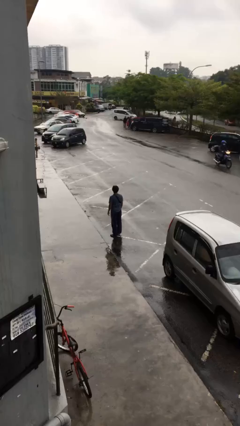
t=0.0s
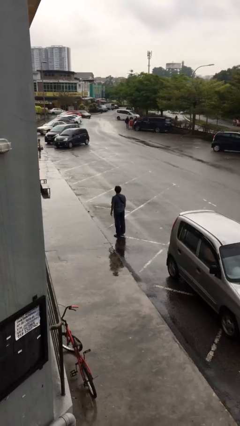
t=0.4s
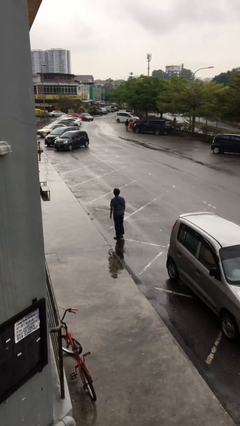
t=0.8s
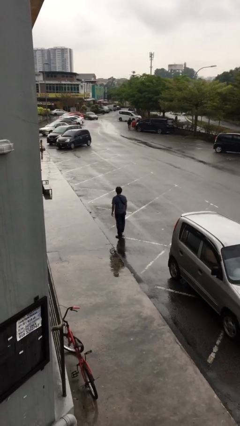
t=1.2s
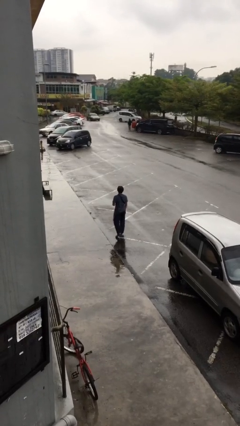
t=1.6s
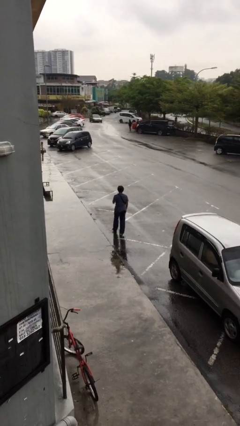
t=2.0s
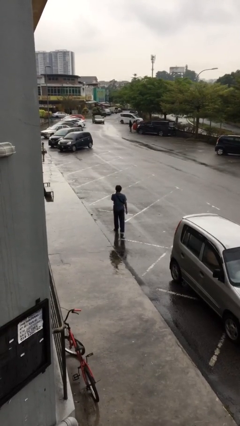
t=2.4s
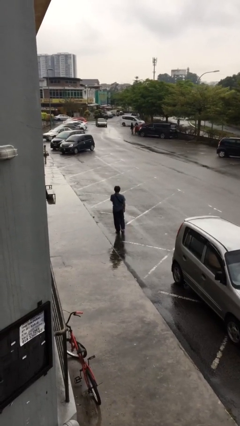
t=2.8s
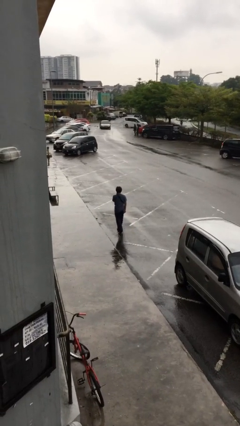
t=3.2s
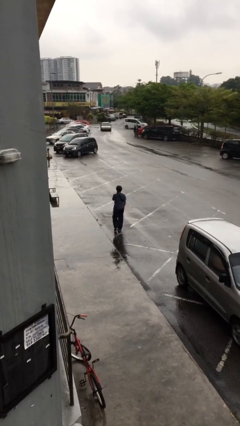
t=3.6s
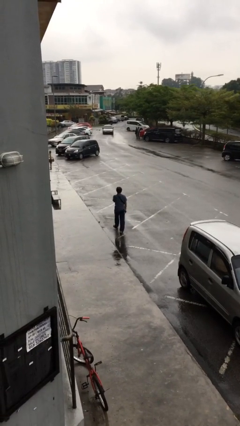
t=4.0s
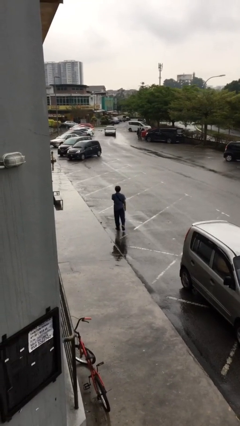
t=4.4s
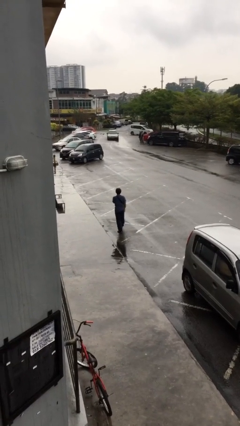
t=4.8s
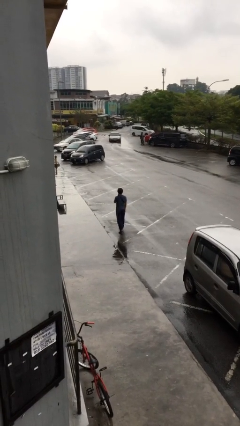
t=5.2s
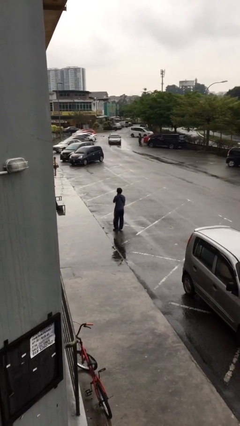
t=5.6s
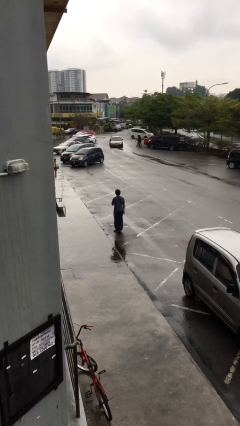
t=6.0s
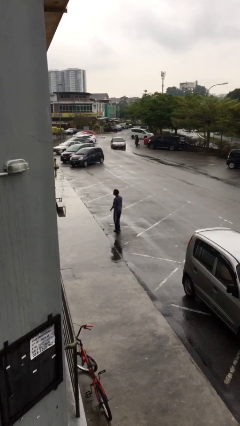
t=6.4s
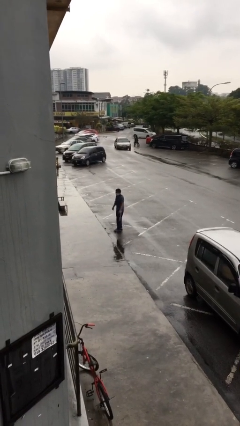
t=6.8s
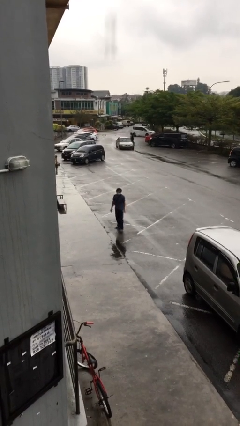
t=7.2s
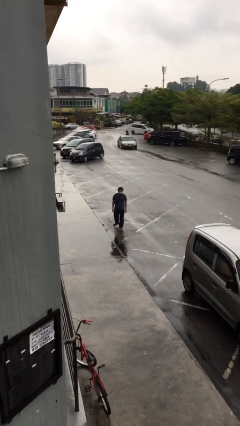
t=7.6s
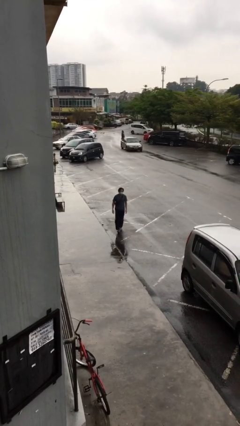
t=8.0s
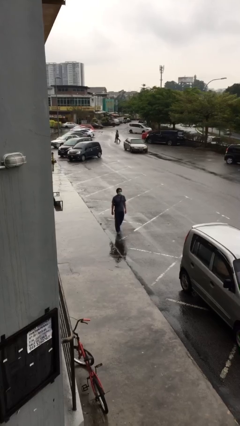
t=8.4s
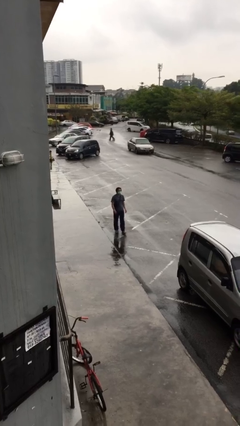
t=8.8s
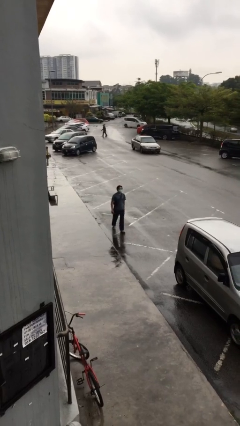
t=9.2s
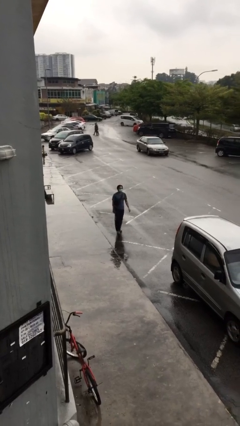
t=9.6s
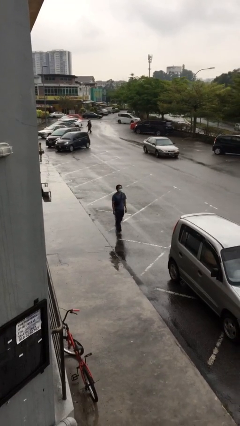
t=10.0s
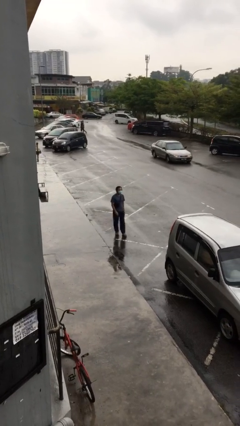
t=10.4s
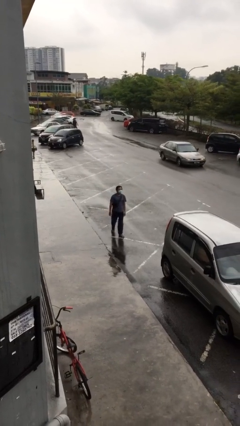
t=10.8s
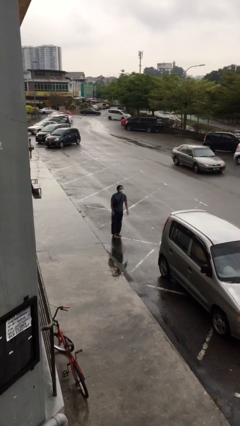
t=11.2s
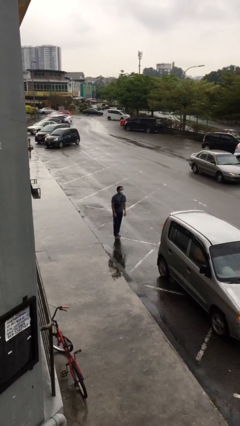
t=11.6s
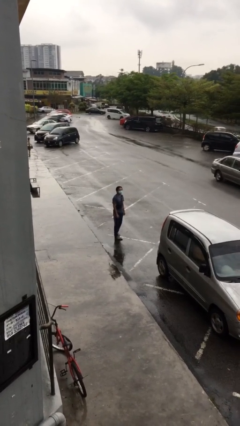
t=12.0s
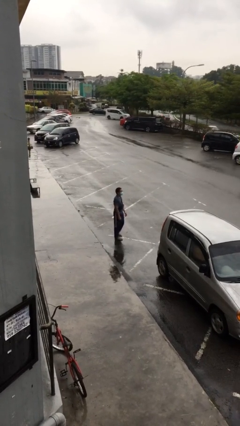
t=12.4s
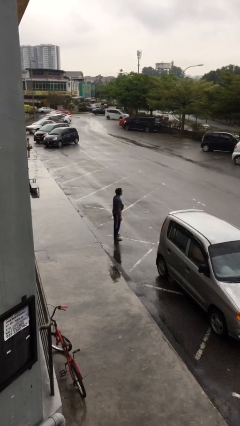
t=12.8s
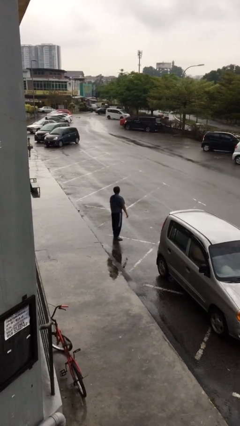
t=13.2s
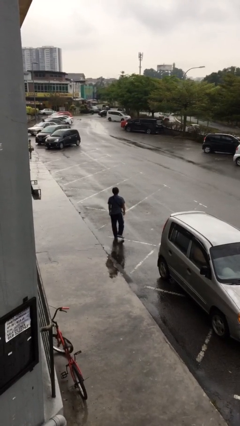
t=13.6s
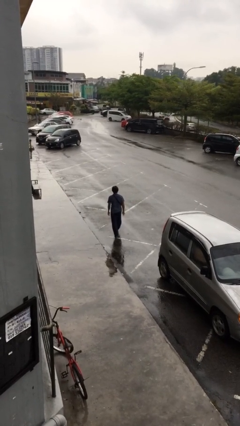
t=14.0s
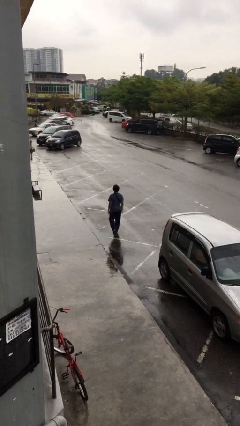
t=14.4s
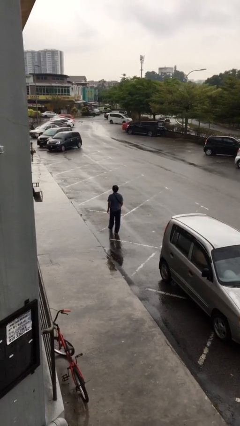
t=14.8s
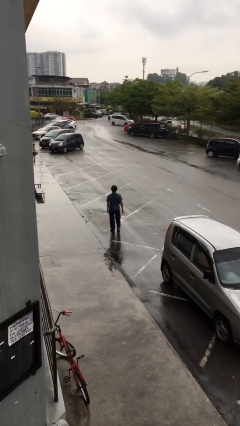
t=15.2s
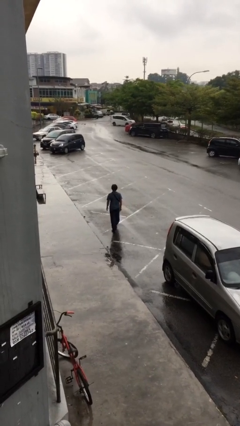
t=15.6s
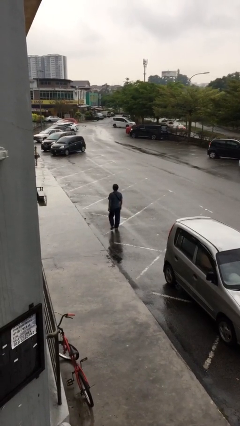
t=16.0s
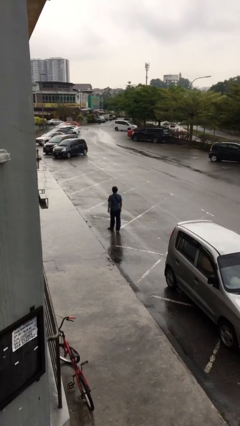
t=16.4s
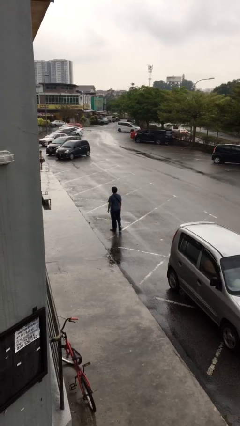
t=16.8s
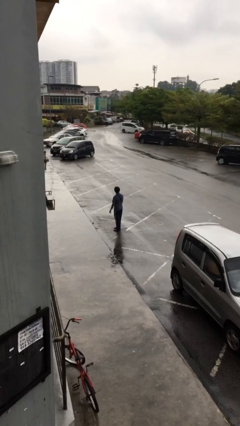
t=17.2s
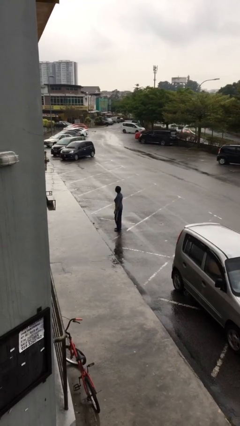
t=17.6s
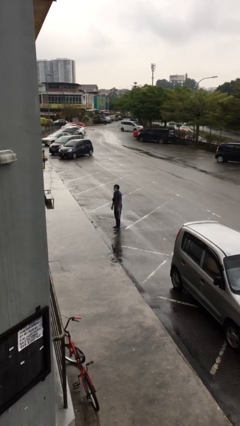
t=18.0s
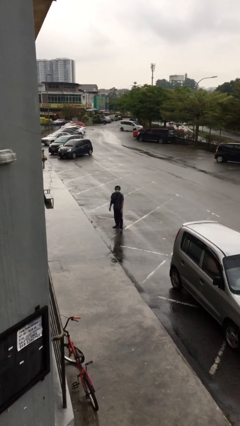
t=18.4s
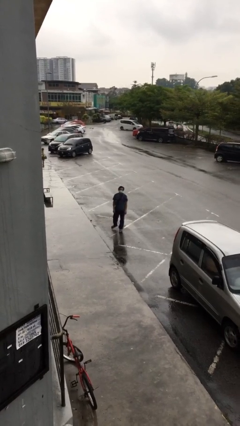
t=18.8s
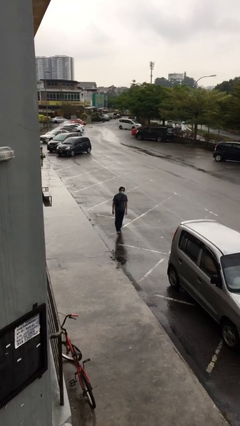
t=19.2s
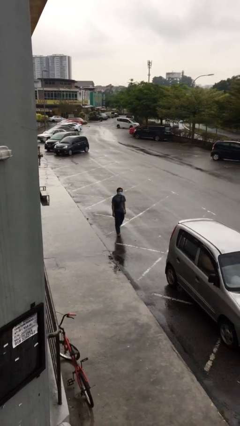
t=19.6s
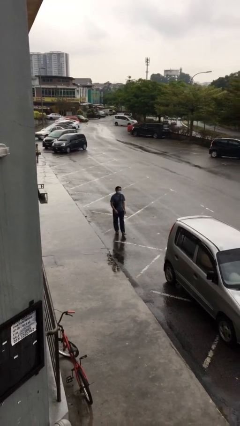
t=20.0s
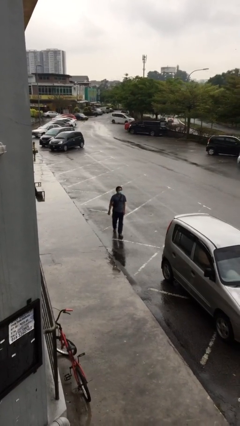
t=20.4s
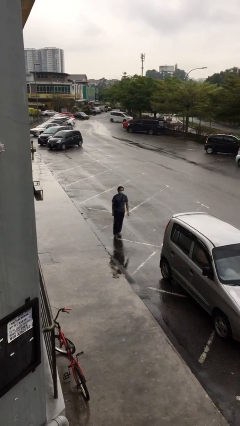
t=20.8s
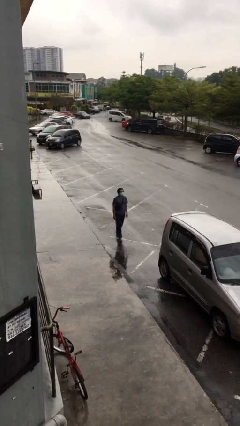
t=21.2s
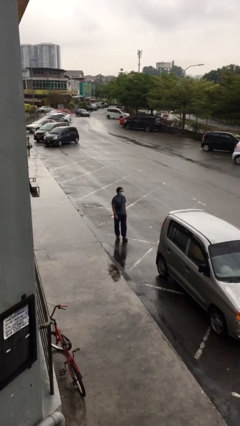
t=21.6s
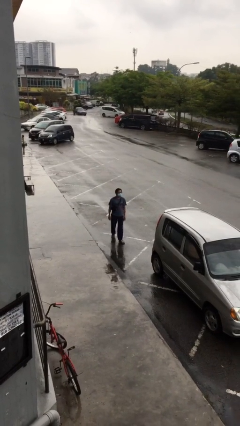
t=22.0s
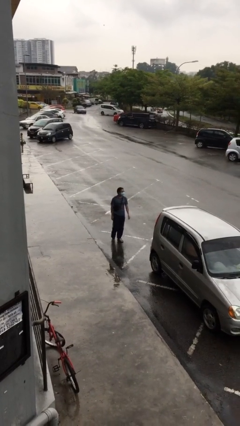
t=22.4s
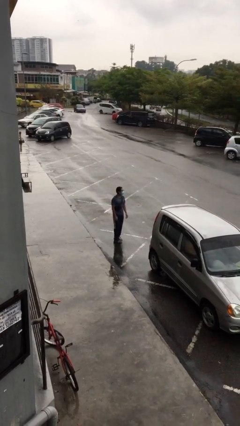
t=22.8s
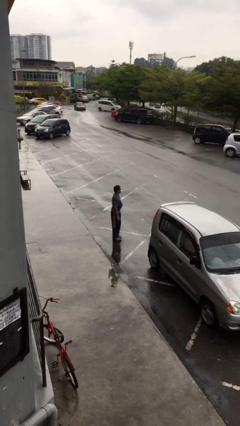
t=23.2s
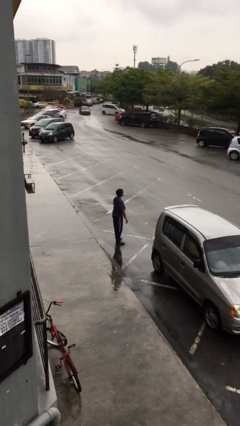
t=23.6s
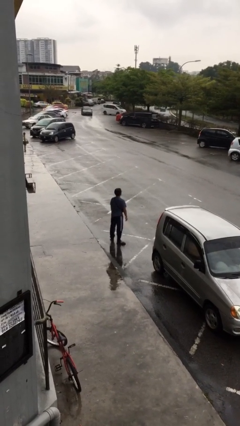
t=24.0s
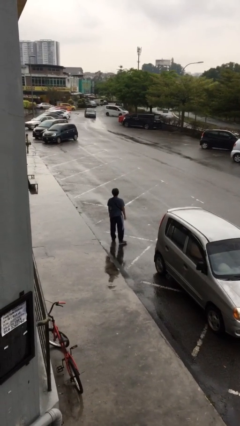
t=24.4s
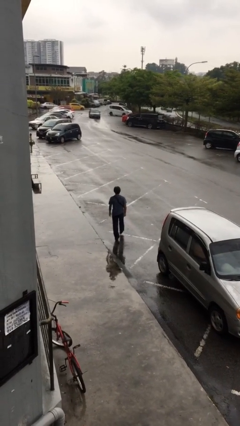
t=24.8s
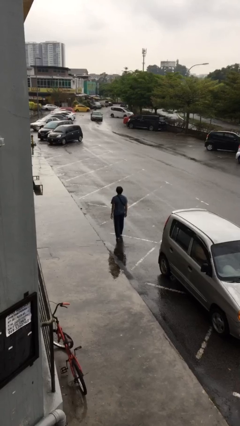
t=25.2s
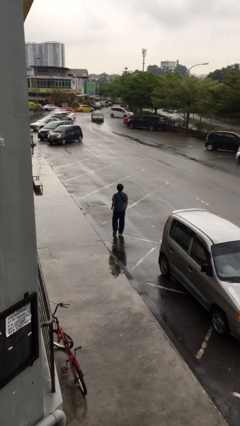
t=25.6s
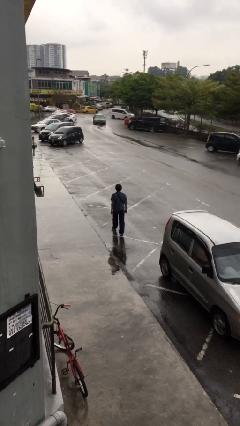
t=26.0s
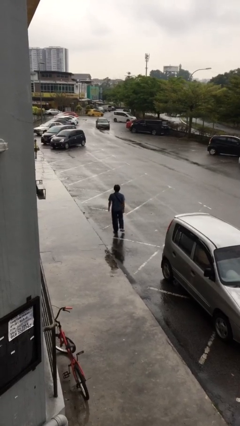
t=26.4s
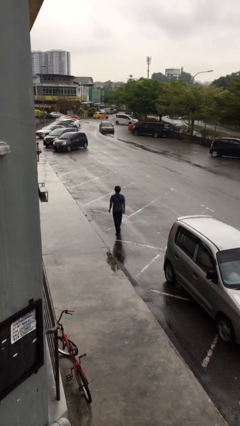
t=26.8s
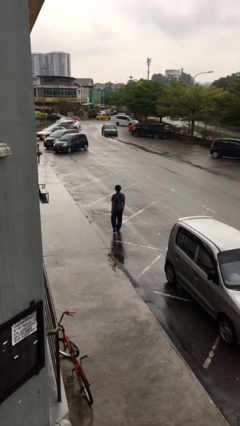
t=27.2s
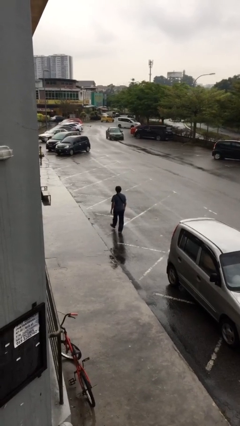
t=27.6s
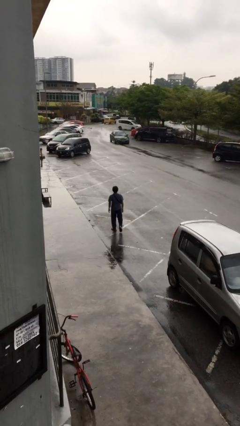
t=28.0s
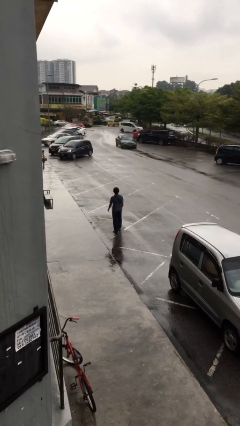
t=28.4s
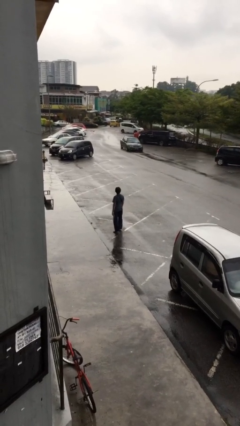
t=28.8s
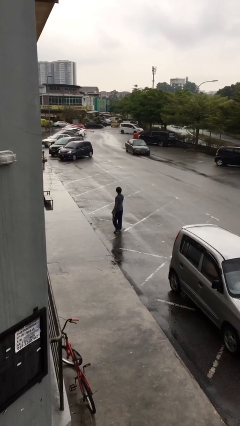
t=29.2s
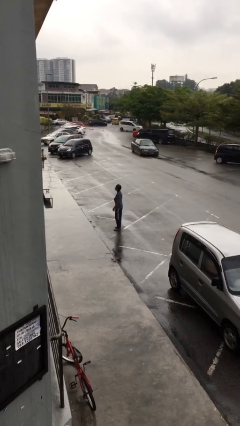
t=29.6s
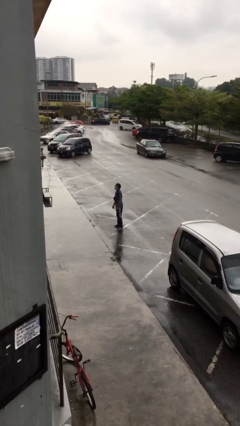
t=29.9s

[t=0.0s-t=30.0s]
person walks

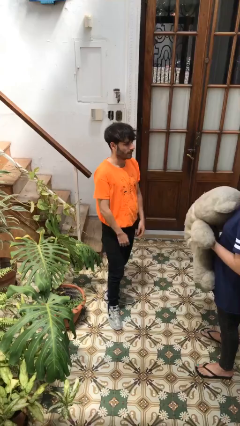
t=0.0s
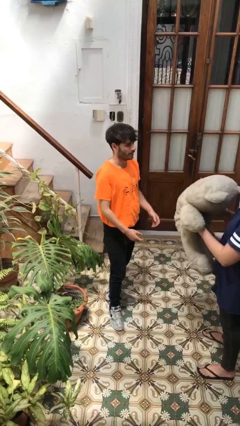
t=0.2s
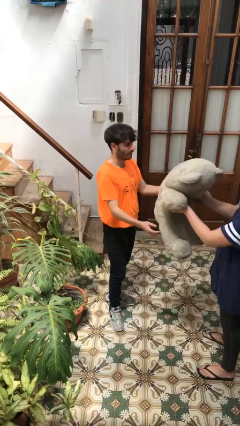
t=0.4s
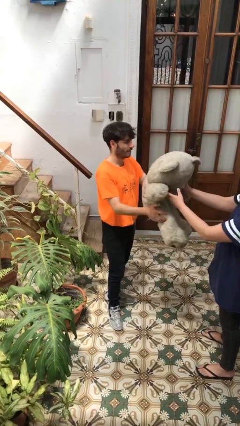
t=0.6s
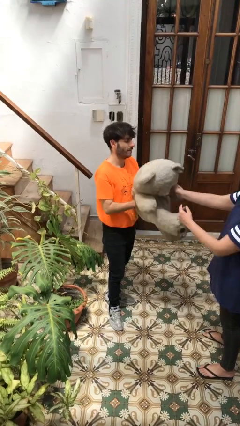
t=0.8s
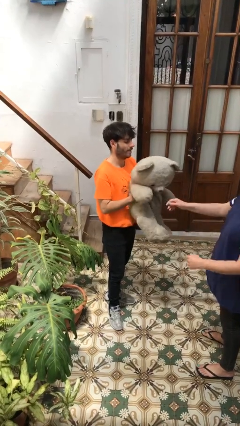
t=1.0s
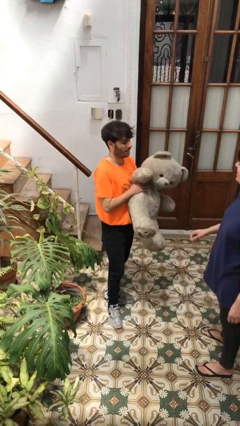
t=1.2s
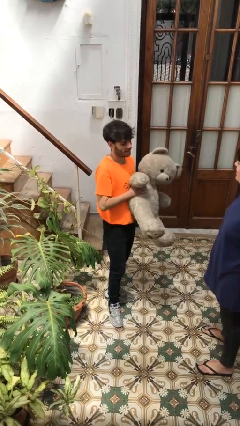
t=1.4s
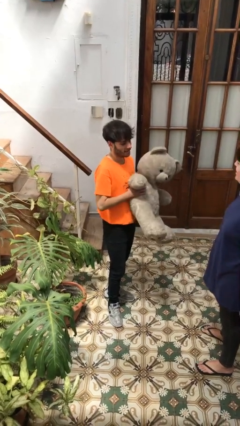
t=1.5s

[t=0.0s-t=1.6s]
person transfers object to person

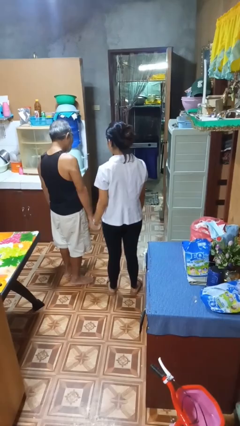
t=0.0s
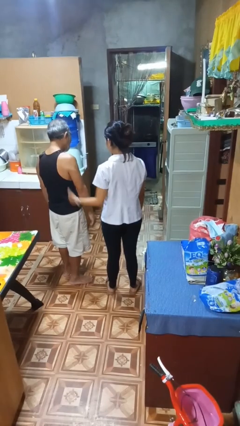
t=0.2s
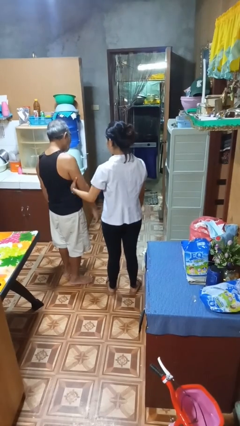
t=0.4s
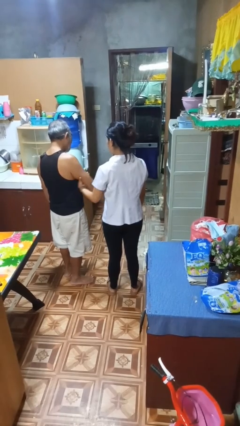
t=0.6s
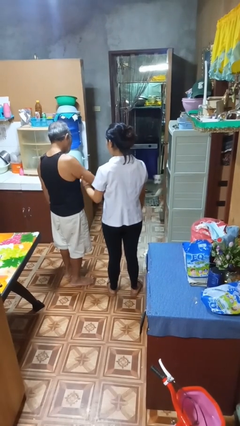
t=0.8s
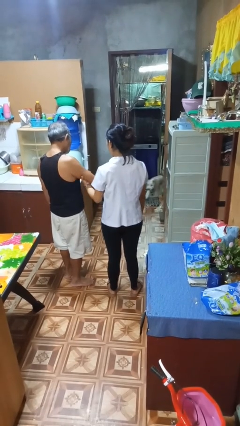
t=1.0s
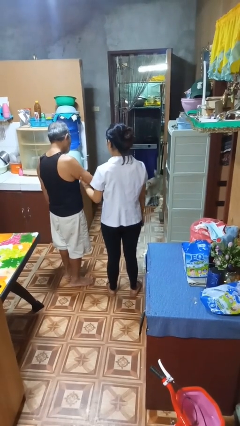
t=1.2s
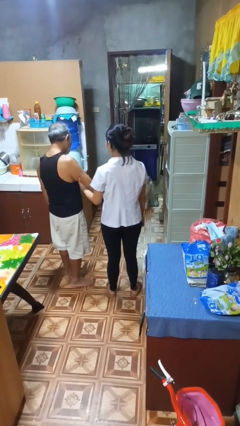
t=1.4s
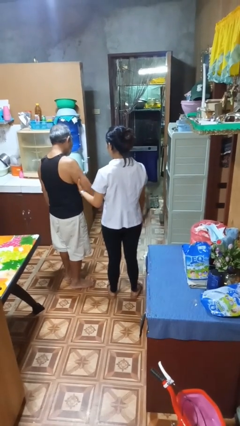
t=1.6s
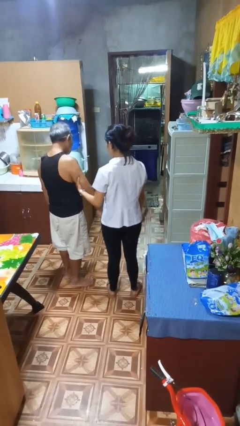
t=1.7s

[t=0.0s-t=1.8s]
person grabs person by bicep
